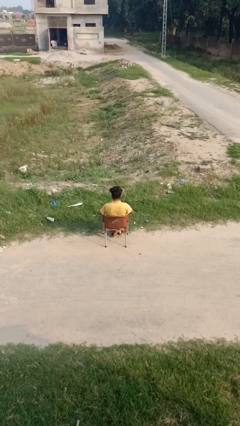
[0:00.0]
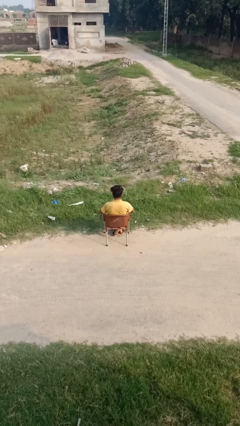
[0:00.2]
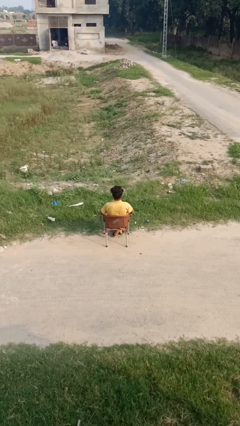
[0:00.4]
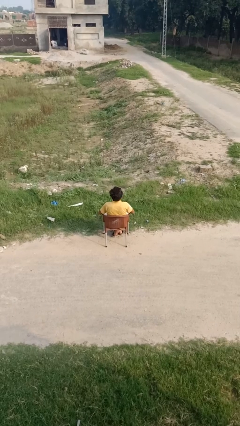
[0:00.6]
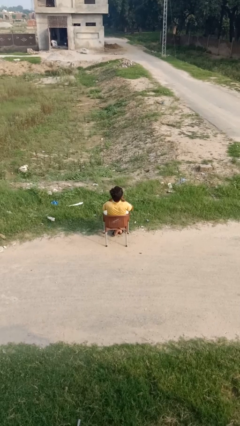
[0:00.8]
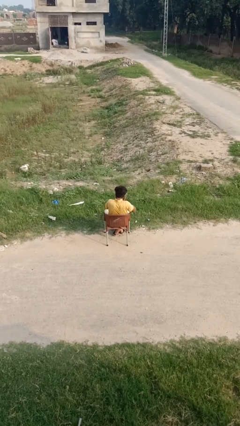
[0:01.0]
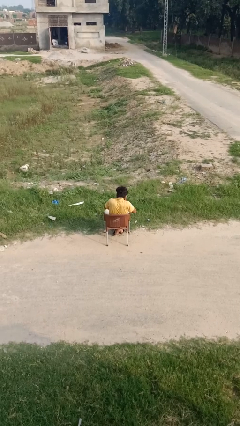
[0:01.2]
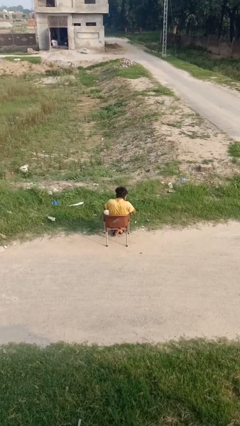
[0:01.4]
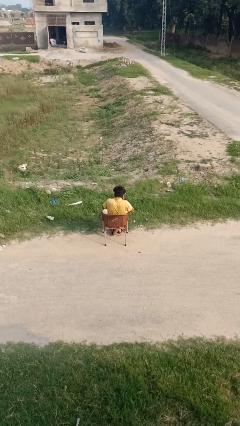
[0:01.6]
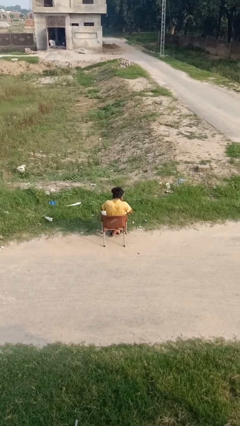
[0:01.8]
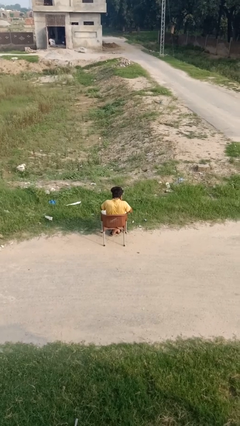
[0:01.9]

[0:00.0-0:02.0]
person sneezes into hand

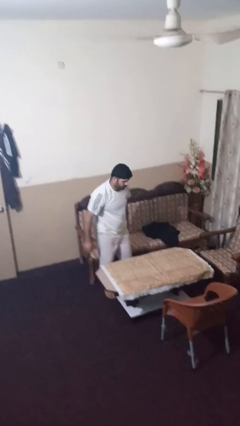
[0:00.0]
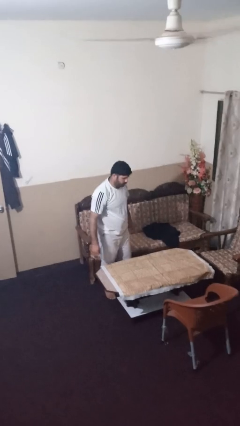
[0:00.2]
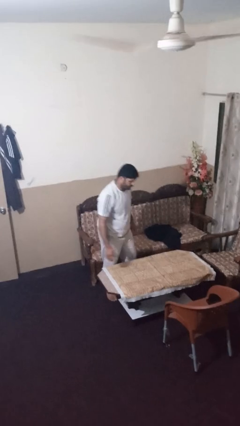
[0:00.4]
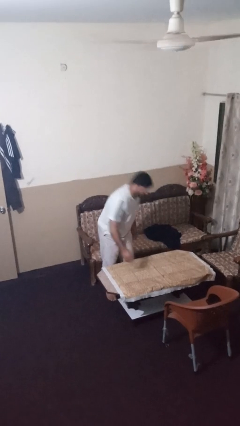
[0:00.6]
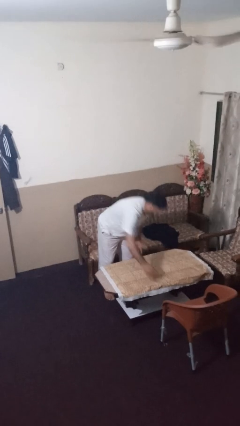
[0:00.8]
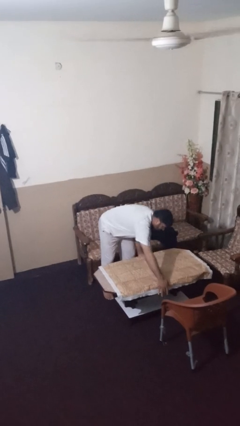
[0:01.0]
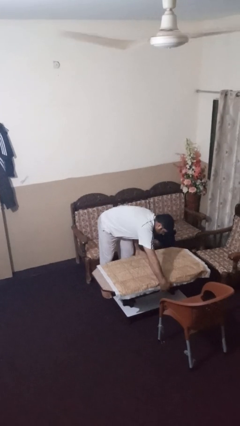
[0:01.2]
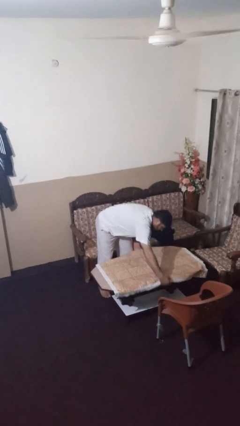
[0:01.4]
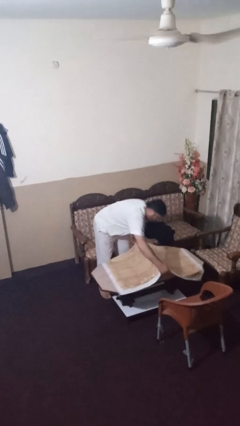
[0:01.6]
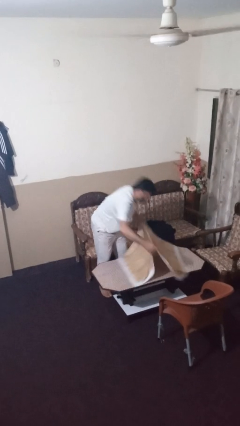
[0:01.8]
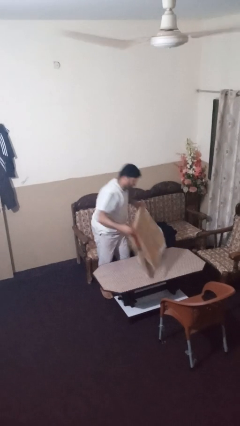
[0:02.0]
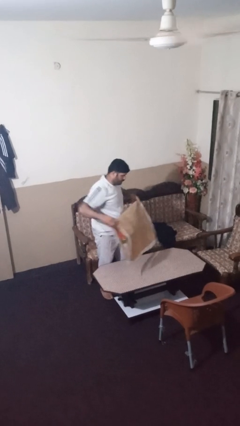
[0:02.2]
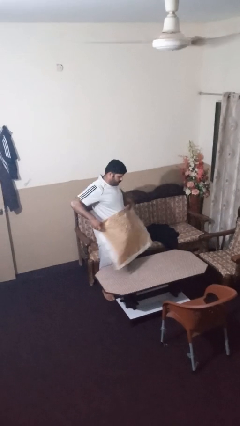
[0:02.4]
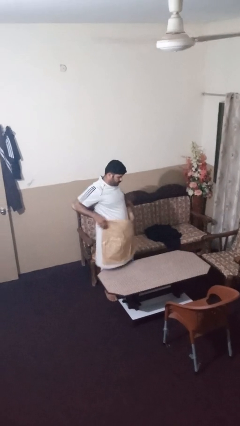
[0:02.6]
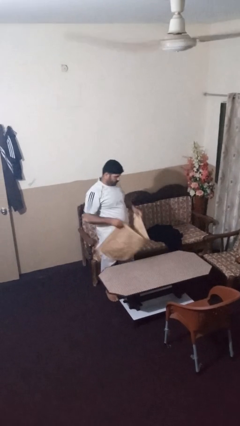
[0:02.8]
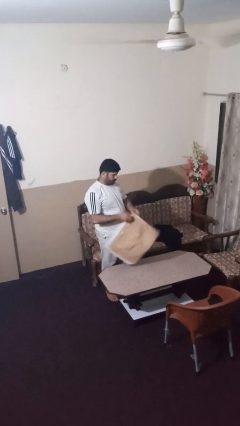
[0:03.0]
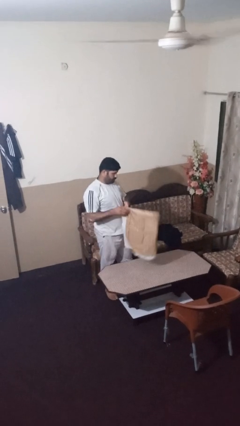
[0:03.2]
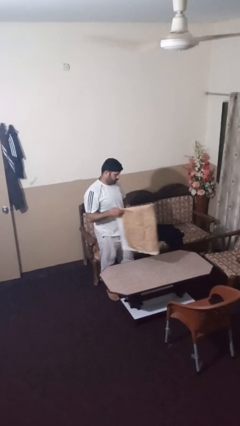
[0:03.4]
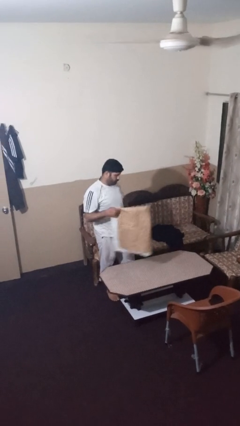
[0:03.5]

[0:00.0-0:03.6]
person folds tablecloth

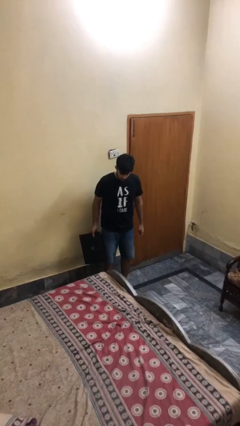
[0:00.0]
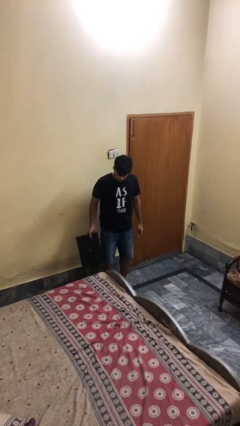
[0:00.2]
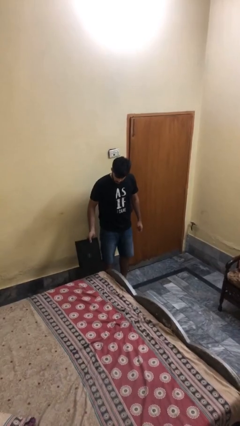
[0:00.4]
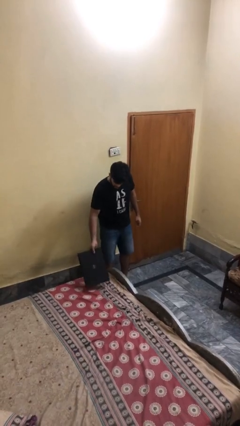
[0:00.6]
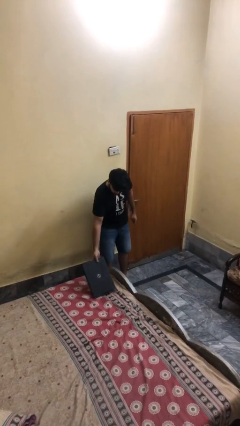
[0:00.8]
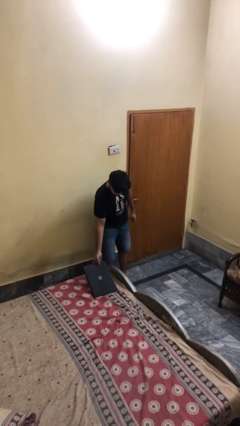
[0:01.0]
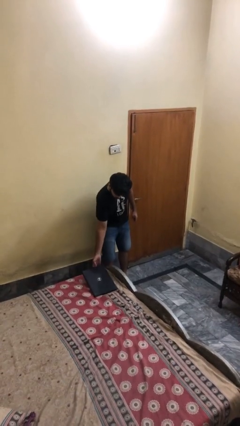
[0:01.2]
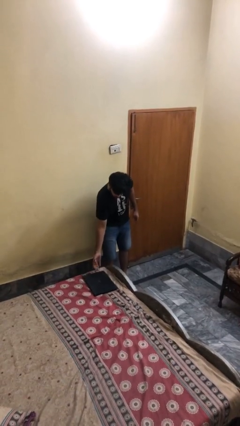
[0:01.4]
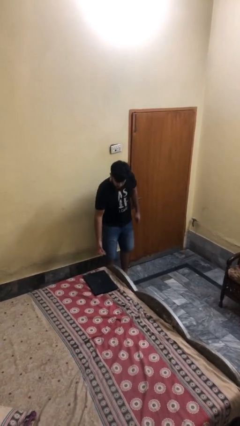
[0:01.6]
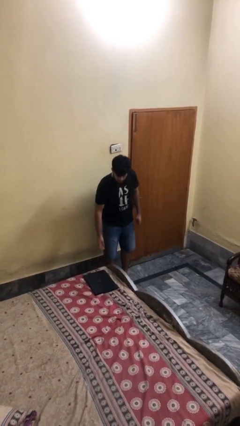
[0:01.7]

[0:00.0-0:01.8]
person puts down object on bed

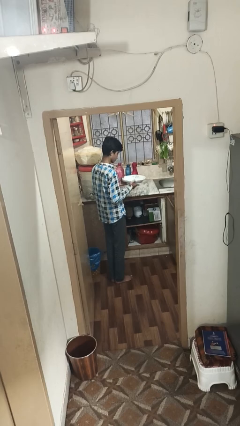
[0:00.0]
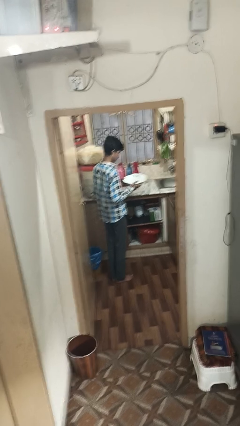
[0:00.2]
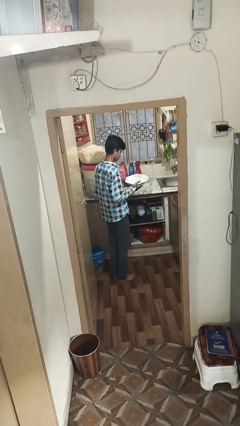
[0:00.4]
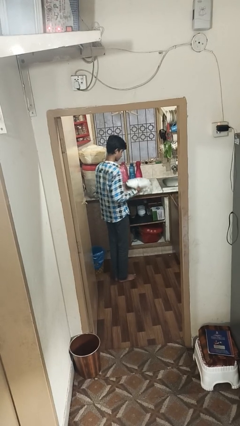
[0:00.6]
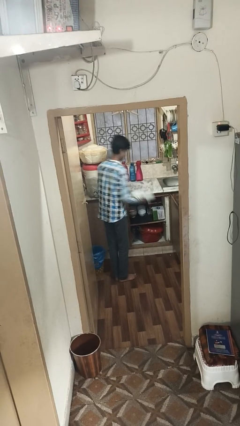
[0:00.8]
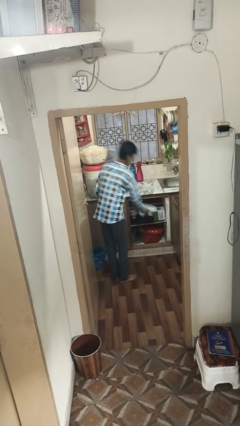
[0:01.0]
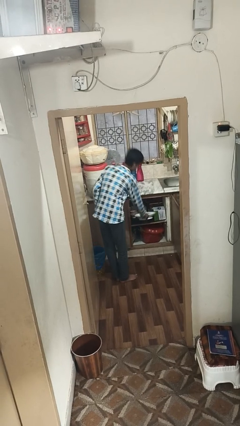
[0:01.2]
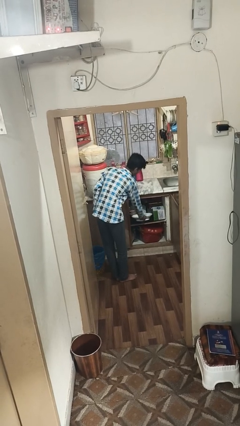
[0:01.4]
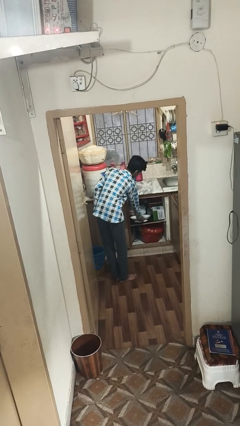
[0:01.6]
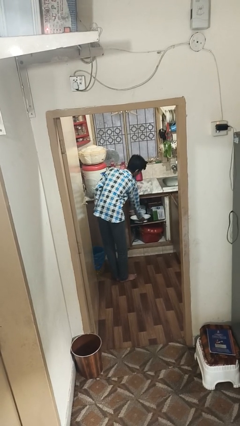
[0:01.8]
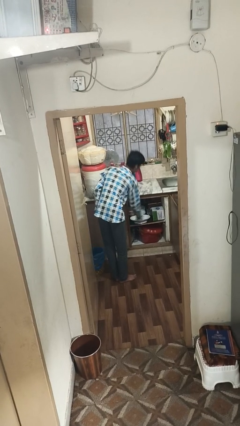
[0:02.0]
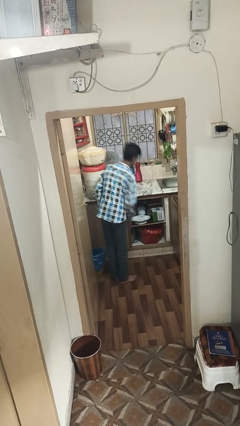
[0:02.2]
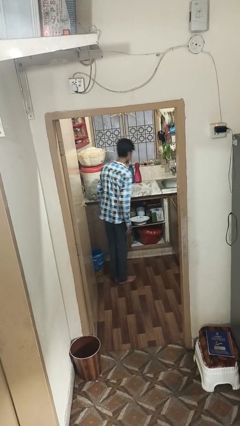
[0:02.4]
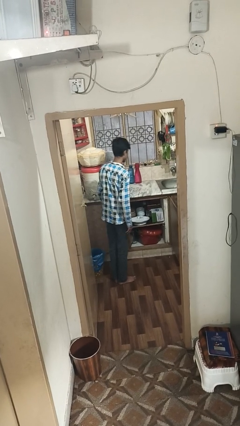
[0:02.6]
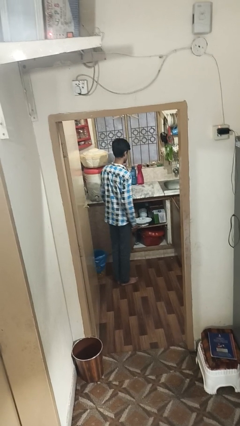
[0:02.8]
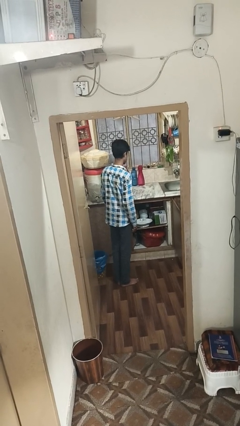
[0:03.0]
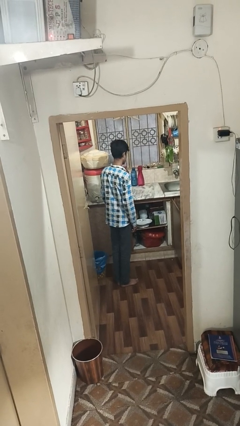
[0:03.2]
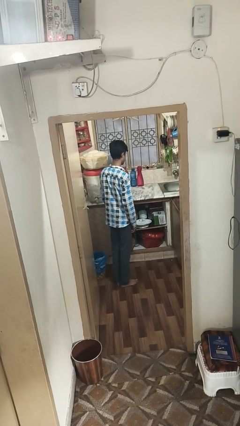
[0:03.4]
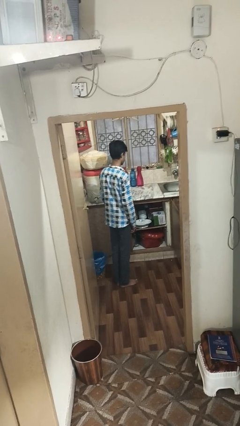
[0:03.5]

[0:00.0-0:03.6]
person puts down object into cabinet

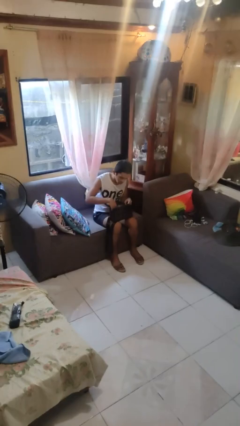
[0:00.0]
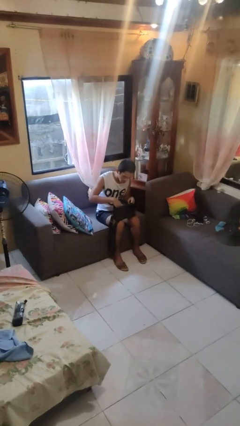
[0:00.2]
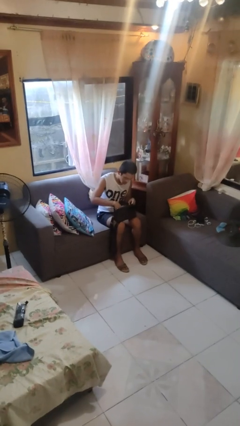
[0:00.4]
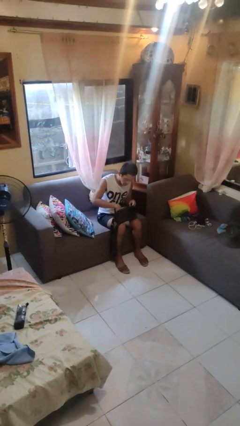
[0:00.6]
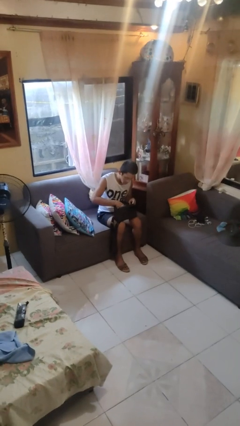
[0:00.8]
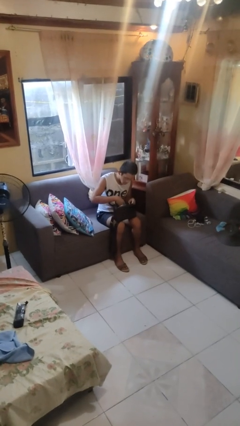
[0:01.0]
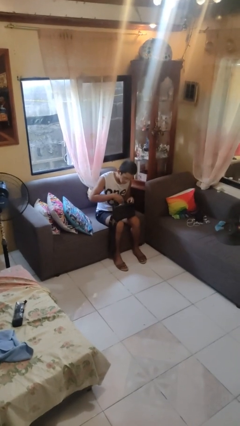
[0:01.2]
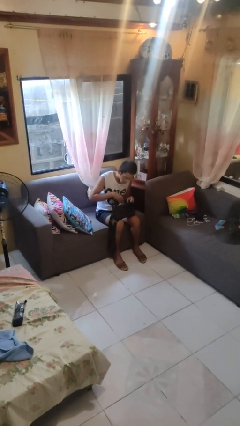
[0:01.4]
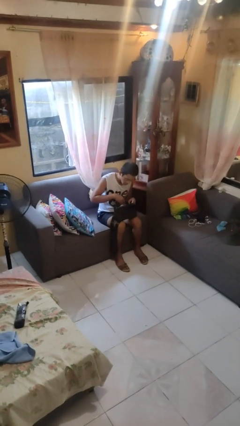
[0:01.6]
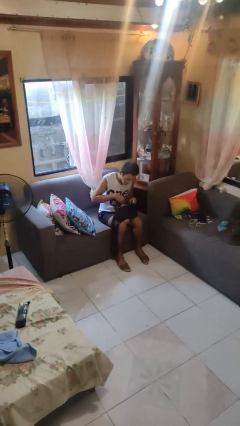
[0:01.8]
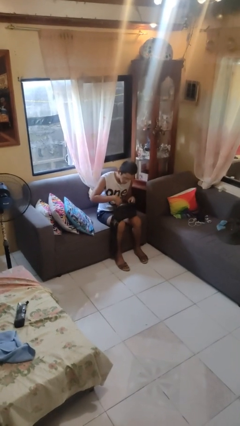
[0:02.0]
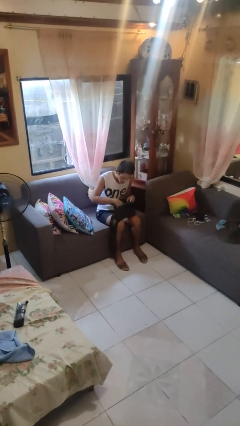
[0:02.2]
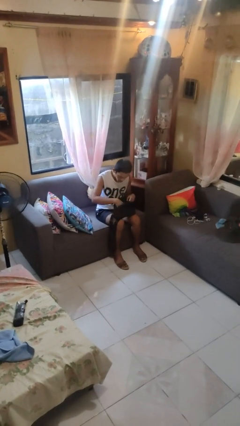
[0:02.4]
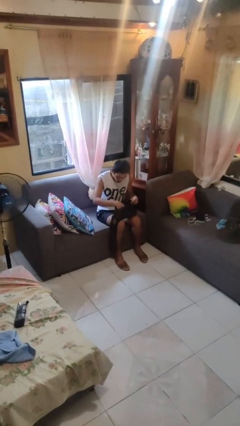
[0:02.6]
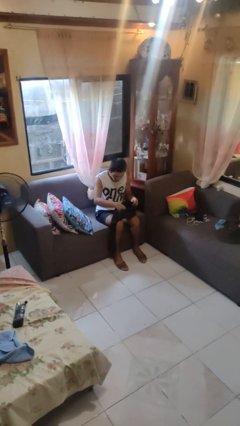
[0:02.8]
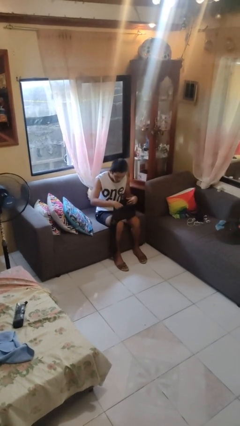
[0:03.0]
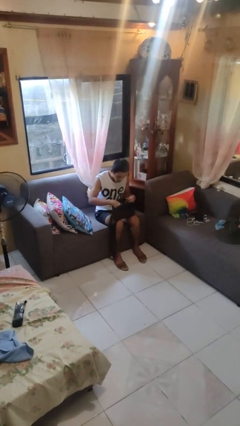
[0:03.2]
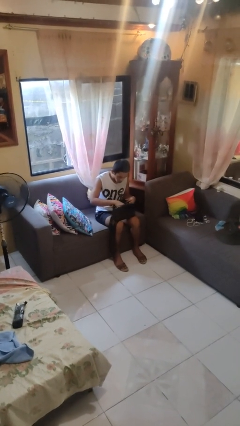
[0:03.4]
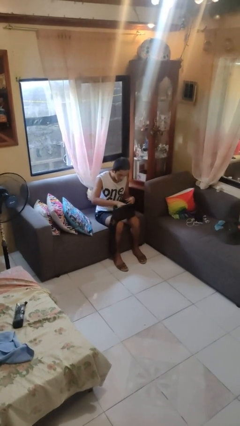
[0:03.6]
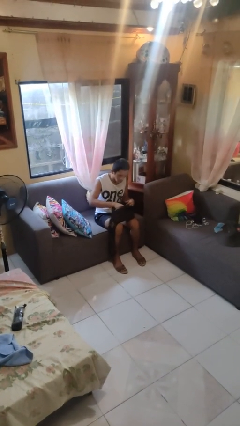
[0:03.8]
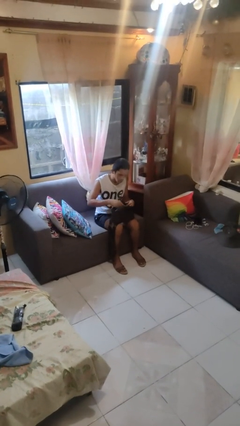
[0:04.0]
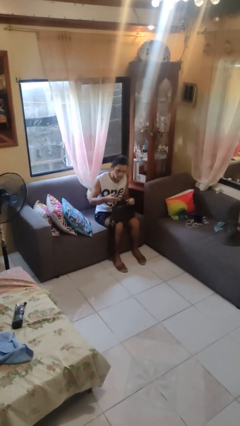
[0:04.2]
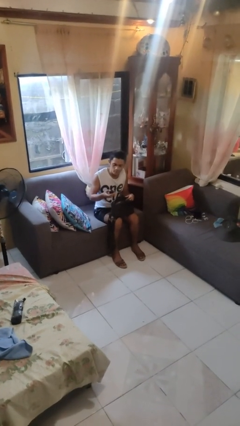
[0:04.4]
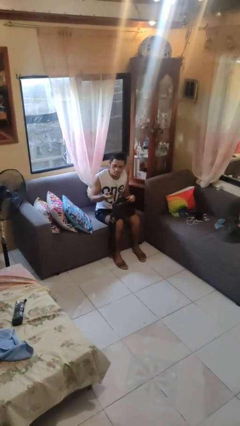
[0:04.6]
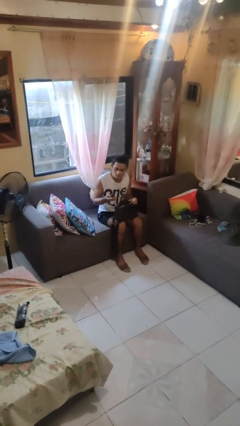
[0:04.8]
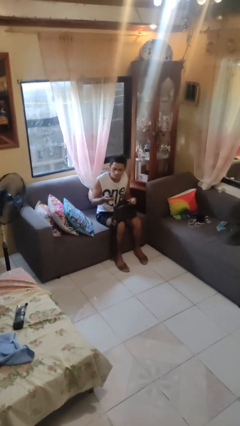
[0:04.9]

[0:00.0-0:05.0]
person searches in purse

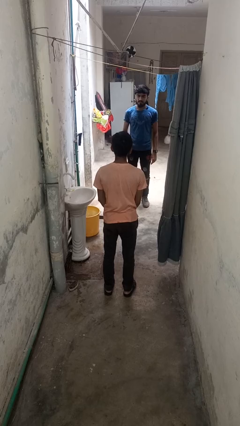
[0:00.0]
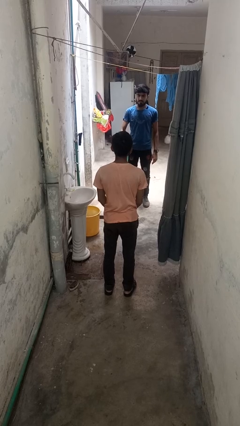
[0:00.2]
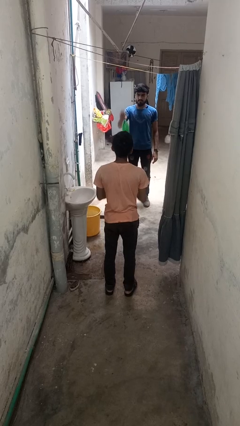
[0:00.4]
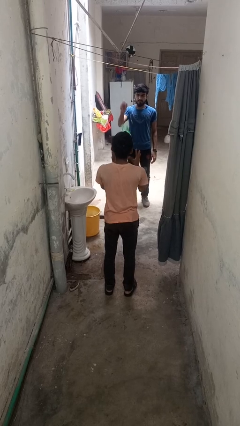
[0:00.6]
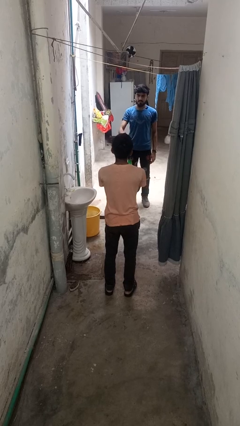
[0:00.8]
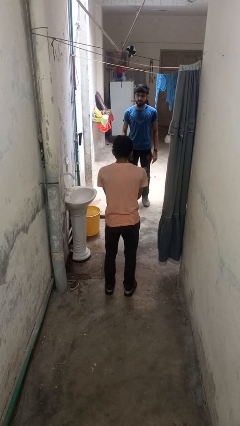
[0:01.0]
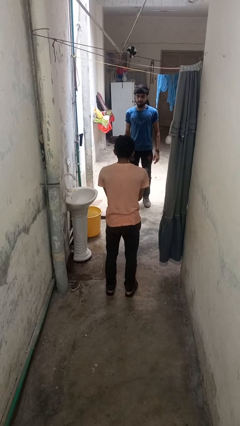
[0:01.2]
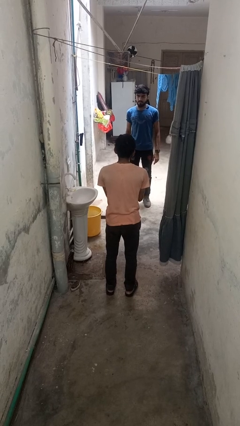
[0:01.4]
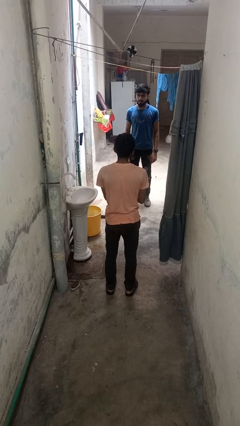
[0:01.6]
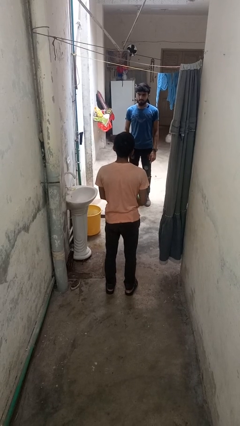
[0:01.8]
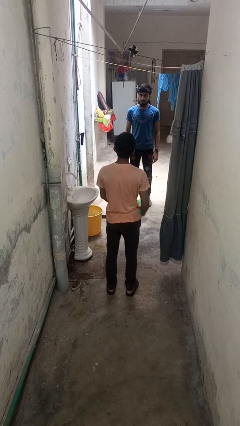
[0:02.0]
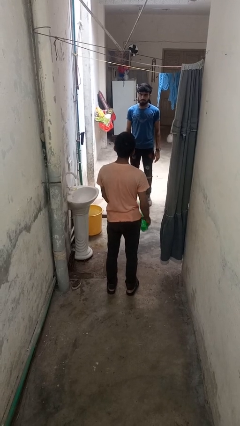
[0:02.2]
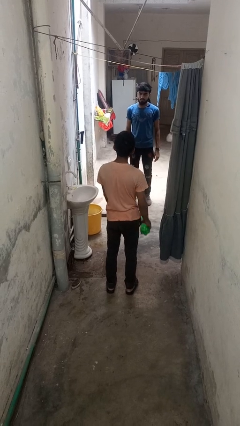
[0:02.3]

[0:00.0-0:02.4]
person catches object from person
